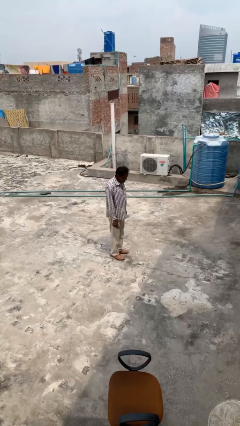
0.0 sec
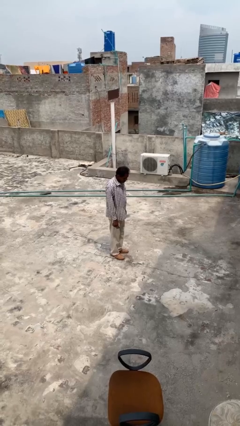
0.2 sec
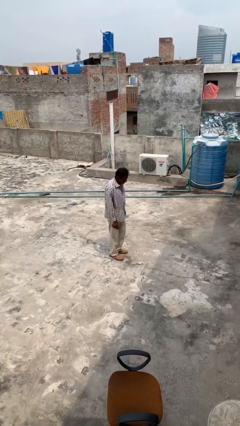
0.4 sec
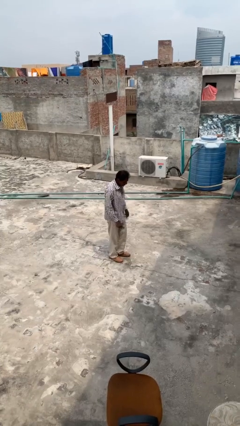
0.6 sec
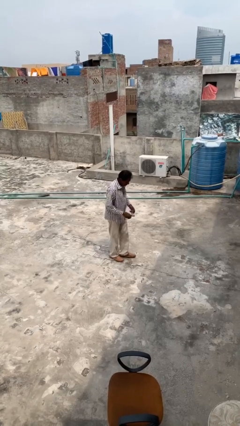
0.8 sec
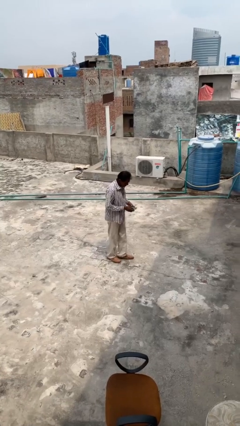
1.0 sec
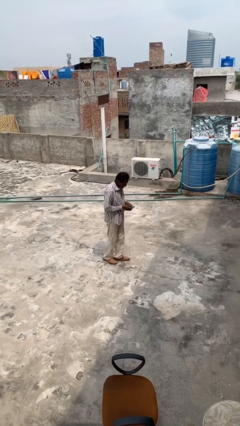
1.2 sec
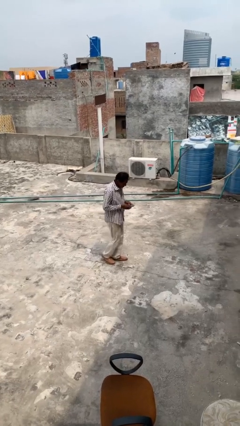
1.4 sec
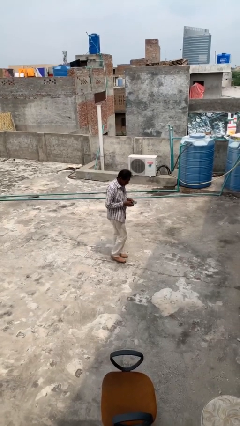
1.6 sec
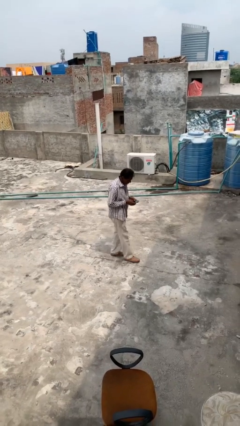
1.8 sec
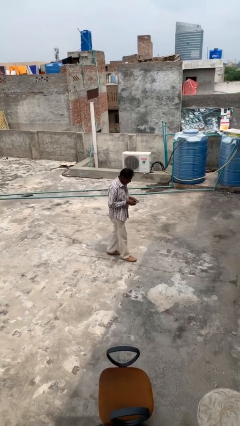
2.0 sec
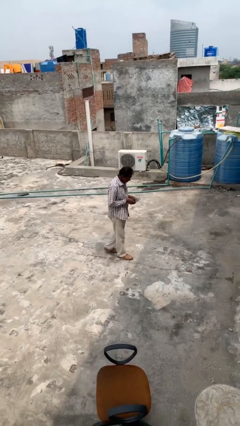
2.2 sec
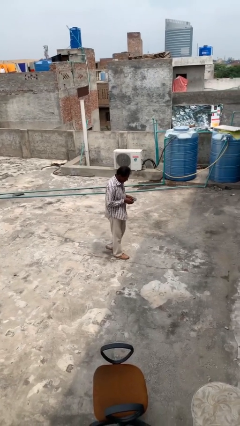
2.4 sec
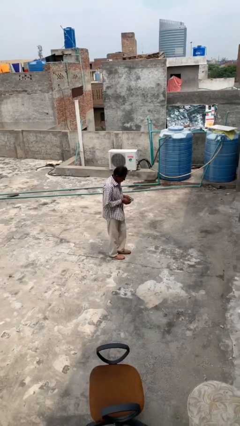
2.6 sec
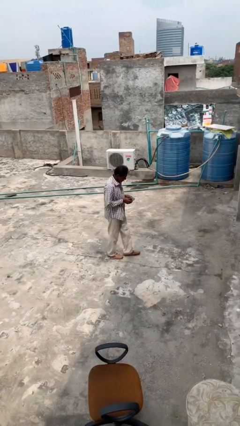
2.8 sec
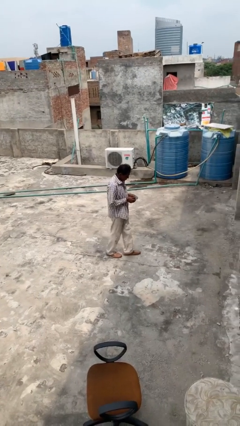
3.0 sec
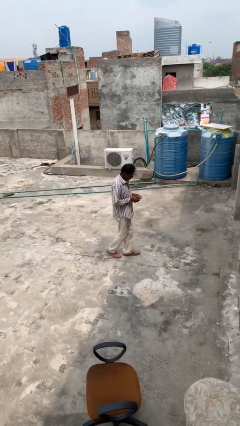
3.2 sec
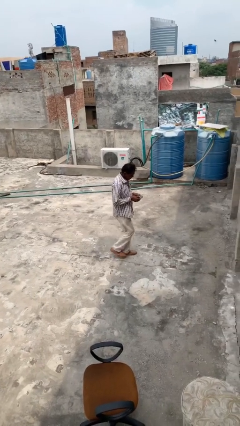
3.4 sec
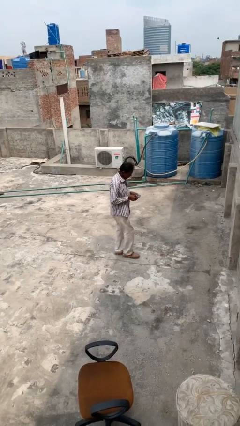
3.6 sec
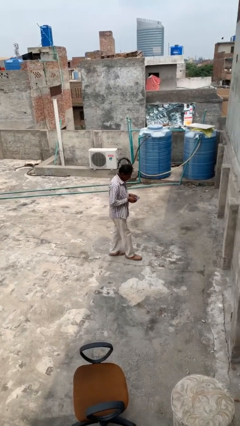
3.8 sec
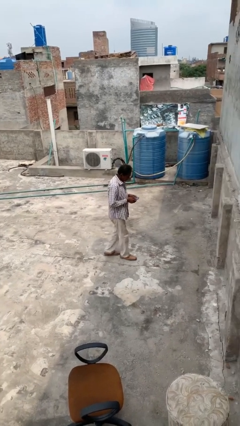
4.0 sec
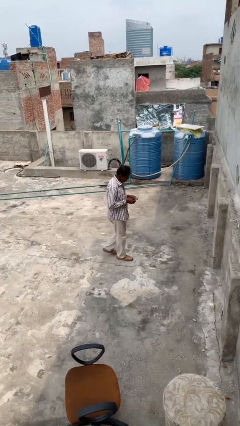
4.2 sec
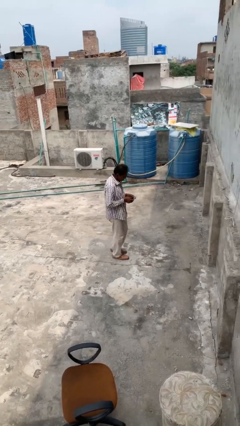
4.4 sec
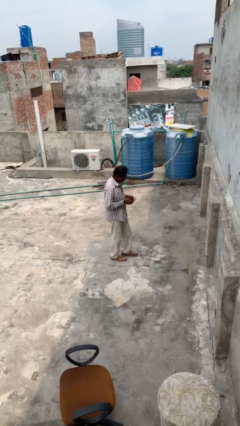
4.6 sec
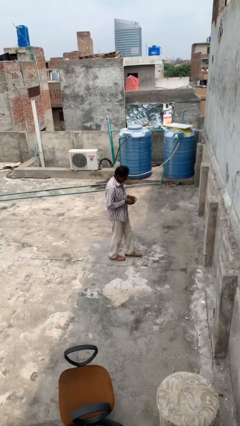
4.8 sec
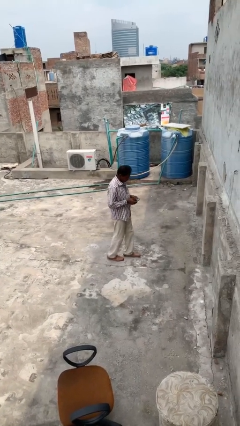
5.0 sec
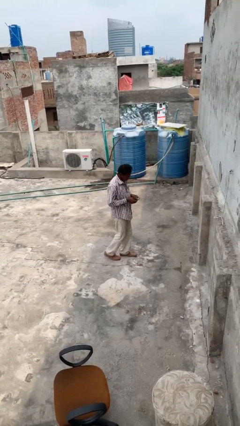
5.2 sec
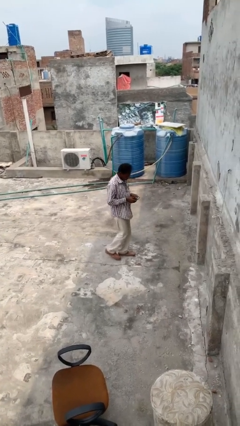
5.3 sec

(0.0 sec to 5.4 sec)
person texts on phone

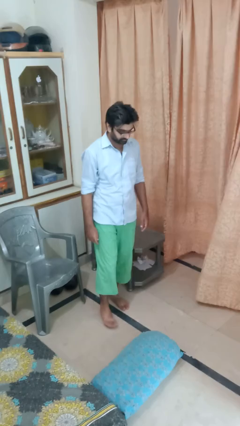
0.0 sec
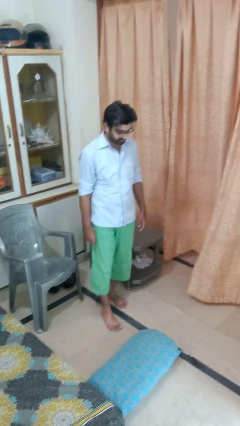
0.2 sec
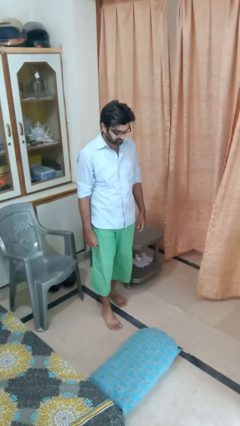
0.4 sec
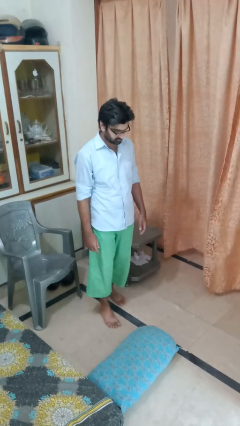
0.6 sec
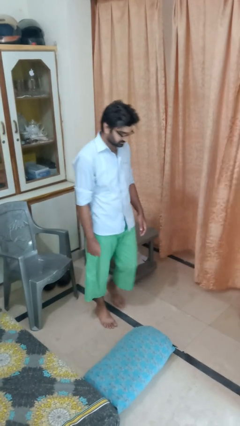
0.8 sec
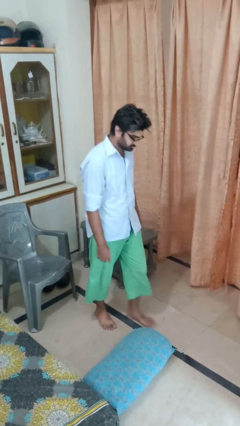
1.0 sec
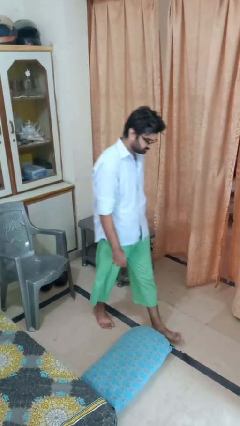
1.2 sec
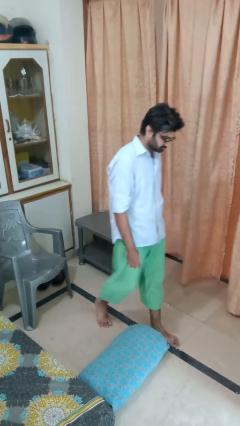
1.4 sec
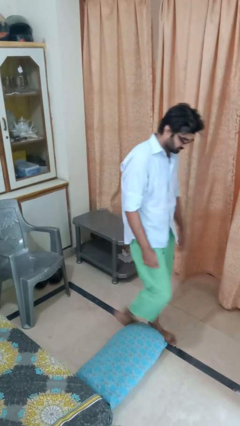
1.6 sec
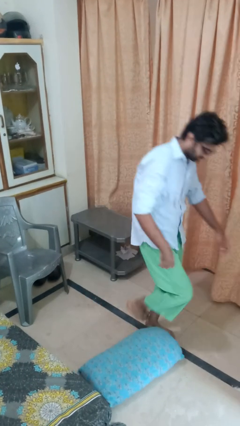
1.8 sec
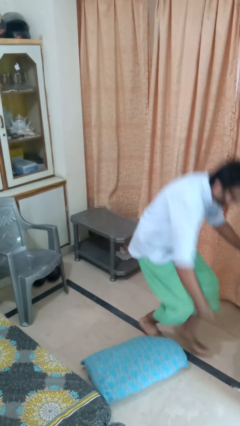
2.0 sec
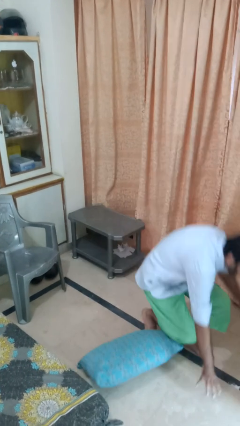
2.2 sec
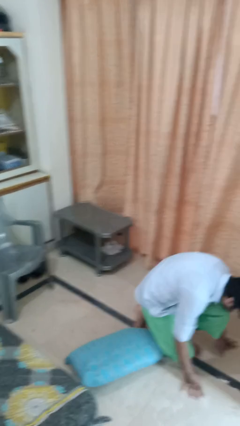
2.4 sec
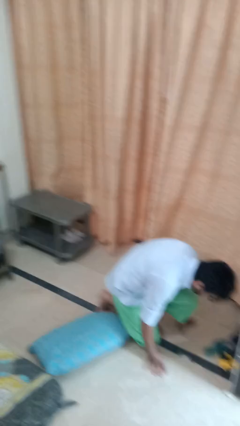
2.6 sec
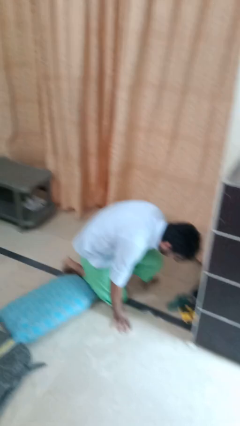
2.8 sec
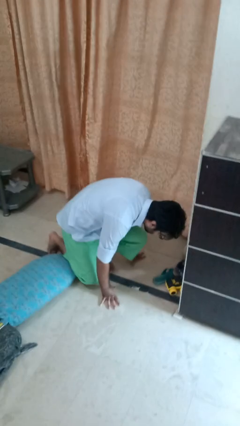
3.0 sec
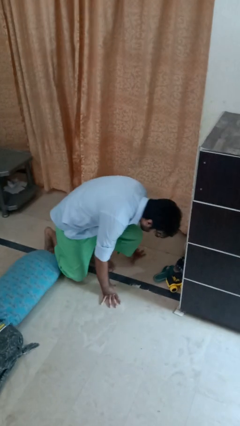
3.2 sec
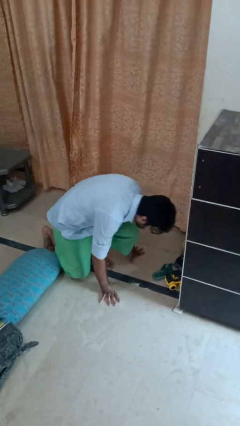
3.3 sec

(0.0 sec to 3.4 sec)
person trips on object on floor

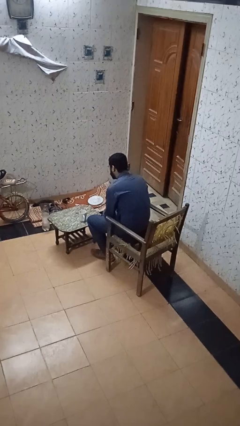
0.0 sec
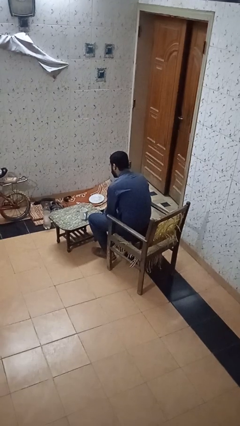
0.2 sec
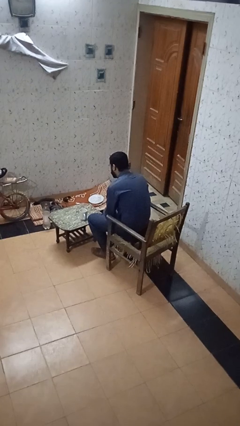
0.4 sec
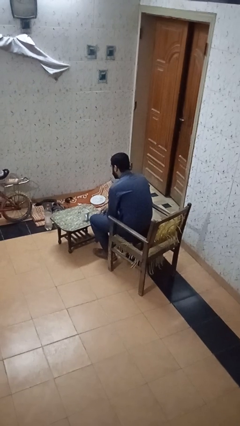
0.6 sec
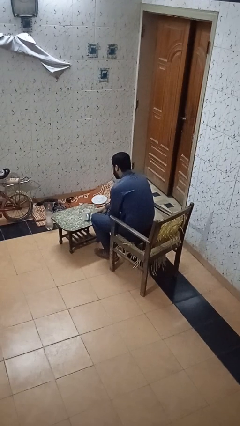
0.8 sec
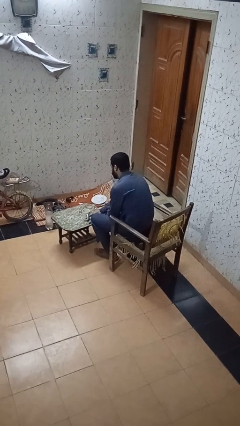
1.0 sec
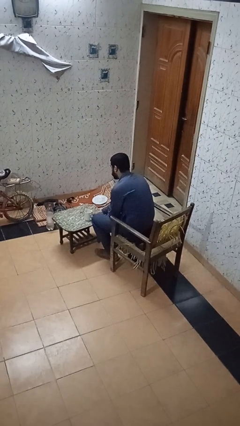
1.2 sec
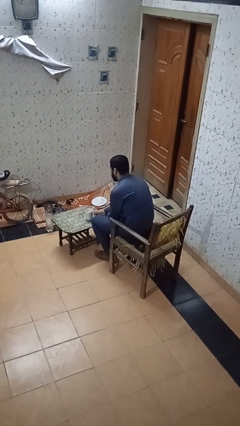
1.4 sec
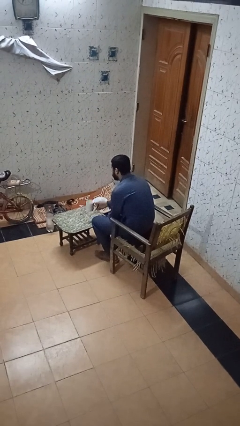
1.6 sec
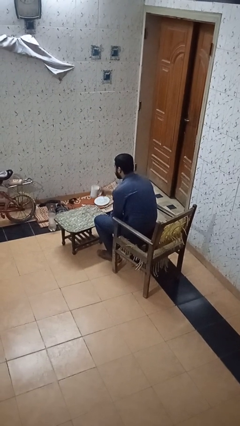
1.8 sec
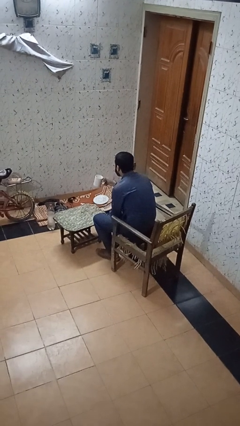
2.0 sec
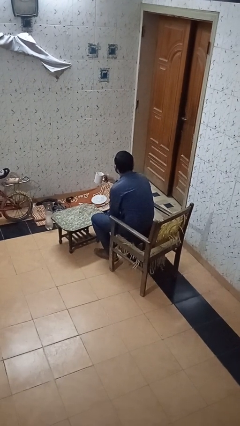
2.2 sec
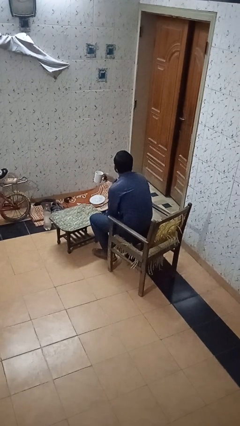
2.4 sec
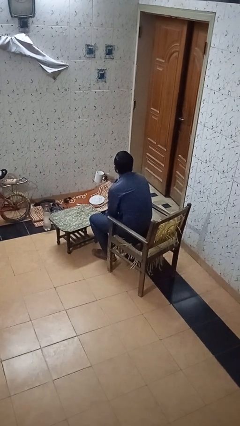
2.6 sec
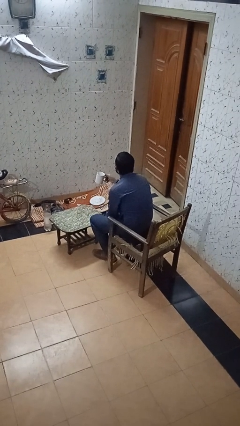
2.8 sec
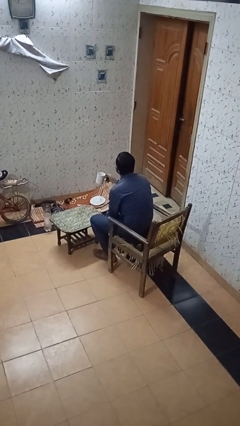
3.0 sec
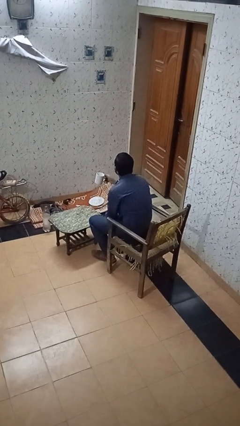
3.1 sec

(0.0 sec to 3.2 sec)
person picks up object from table

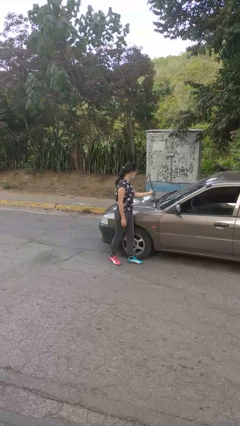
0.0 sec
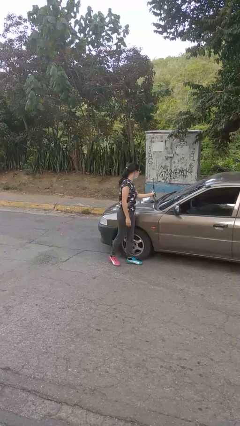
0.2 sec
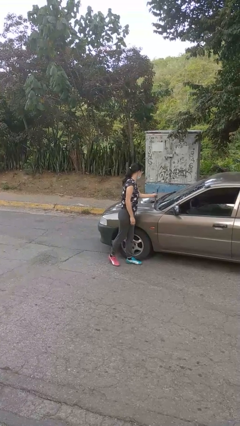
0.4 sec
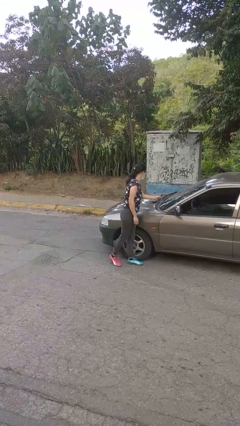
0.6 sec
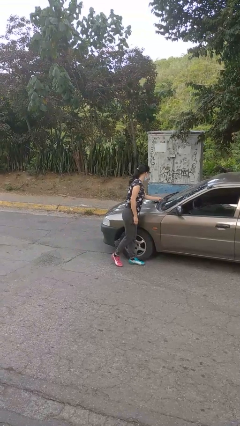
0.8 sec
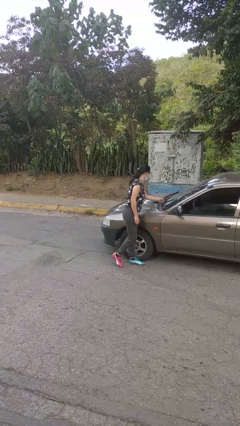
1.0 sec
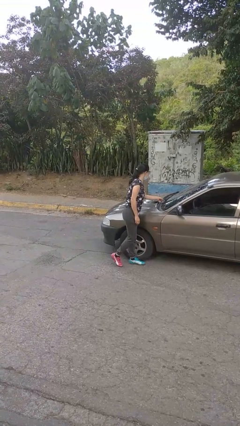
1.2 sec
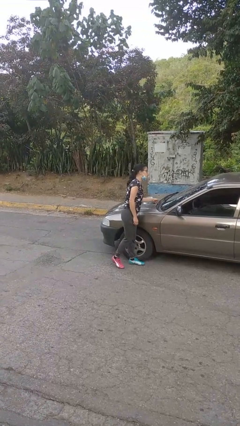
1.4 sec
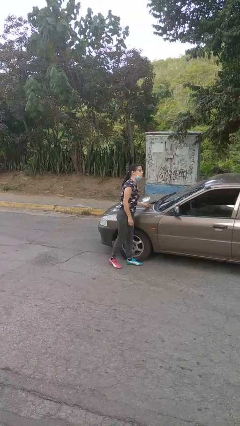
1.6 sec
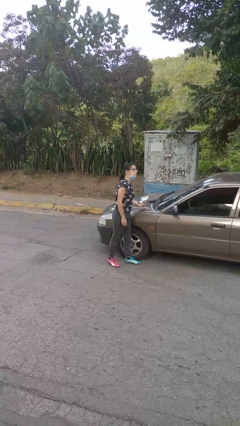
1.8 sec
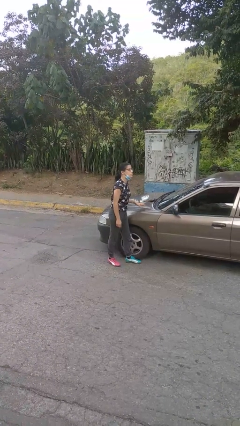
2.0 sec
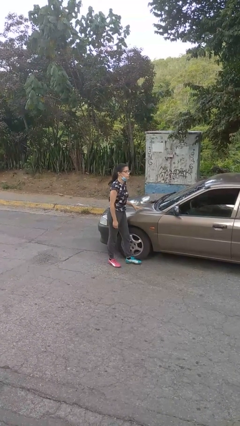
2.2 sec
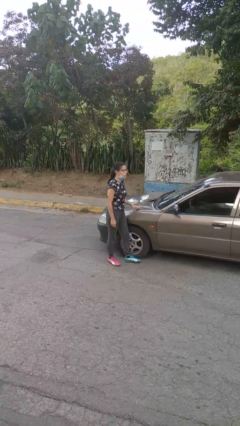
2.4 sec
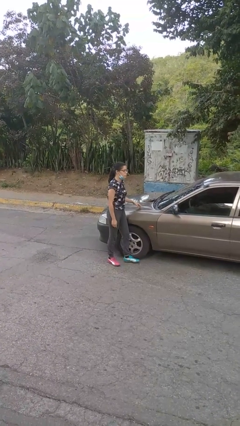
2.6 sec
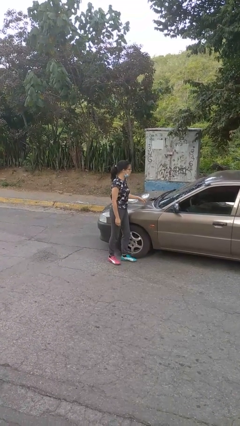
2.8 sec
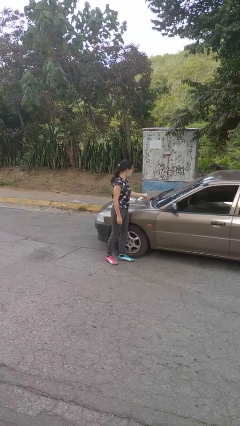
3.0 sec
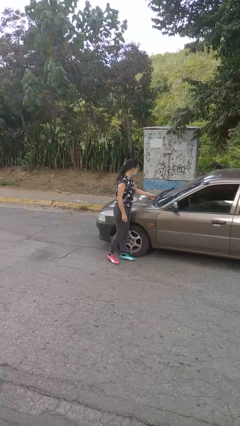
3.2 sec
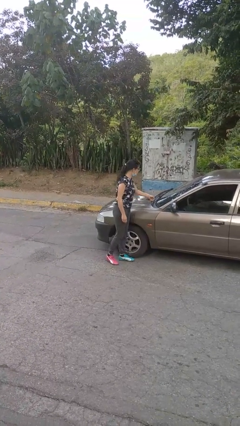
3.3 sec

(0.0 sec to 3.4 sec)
person flips down car wipers

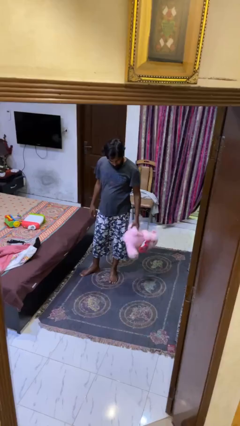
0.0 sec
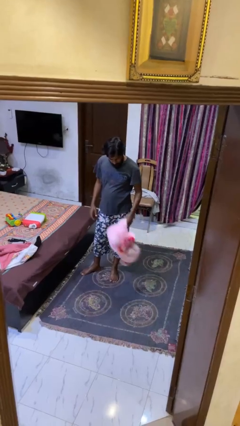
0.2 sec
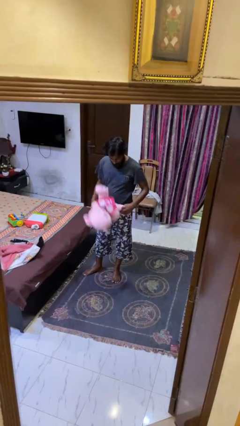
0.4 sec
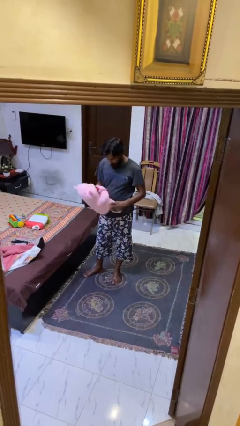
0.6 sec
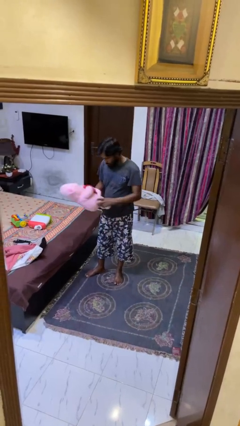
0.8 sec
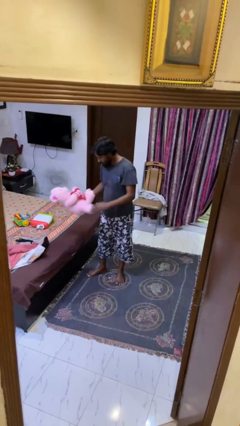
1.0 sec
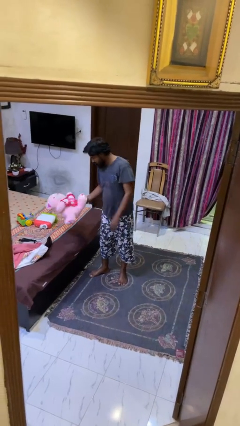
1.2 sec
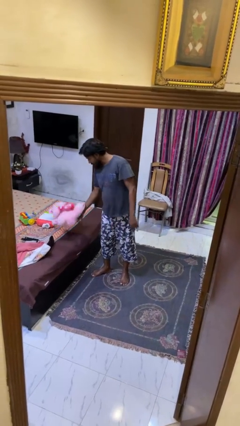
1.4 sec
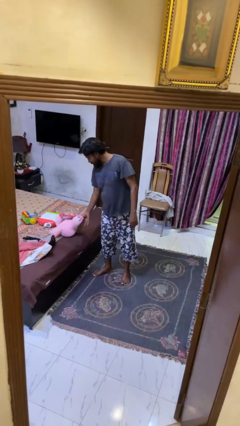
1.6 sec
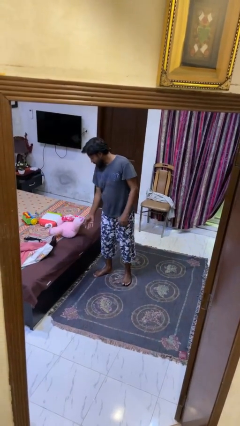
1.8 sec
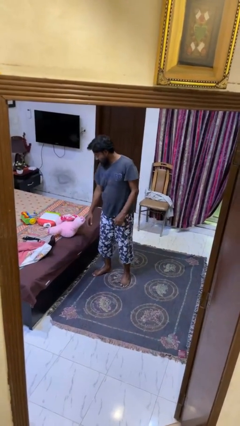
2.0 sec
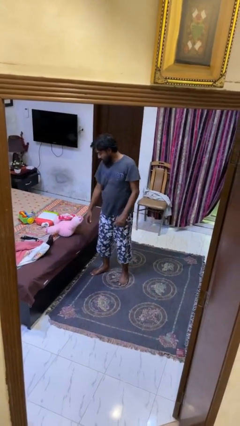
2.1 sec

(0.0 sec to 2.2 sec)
person puts down object on bed
